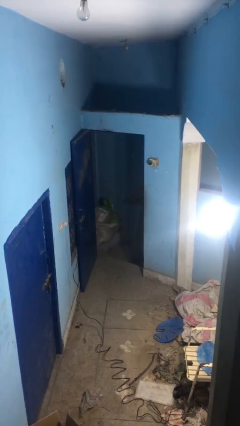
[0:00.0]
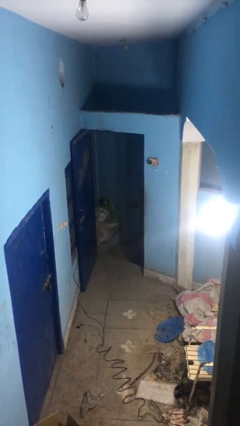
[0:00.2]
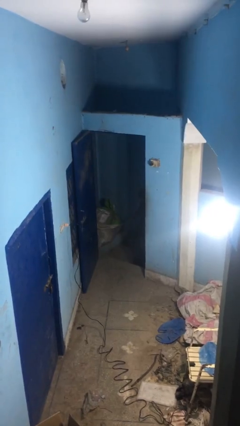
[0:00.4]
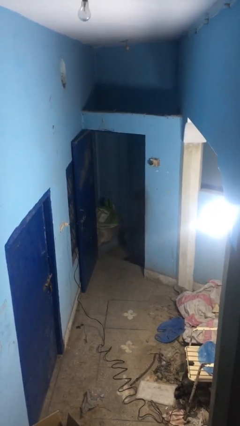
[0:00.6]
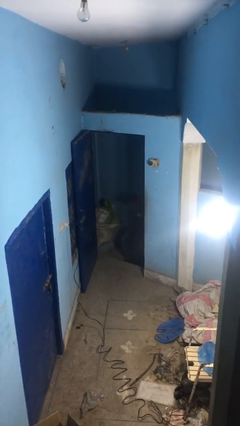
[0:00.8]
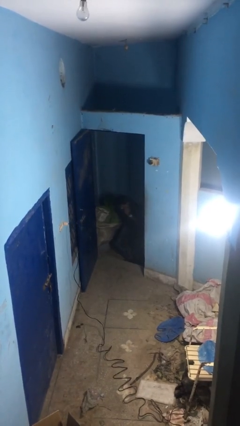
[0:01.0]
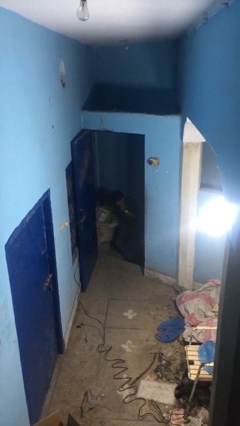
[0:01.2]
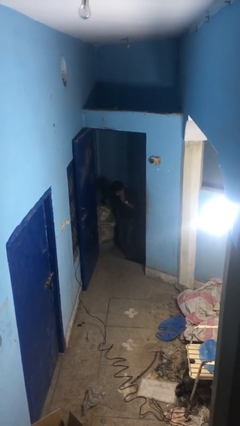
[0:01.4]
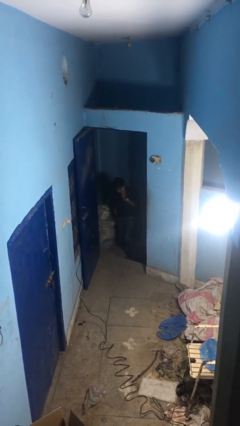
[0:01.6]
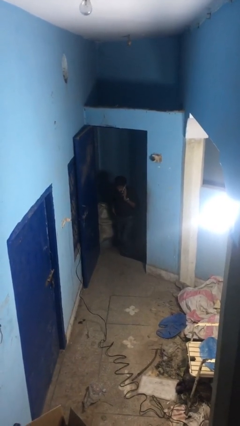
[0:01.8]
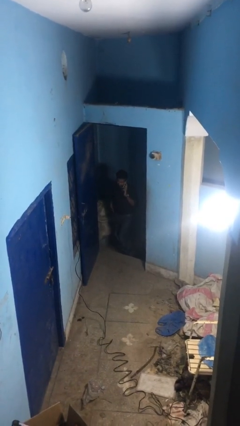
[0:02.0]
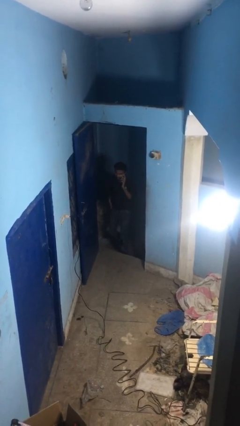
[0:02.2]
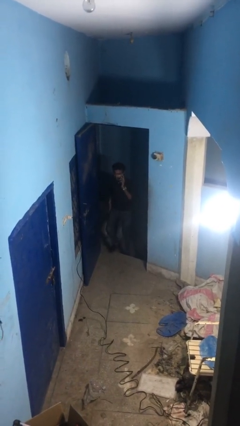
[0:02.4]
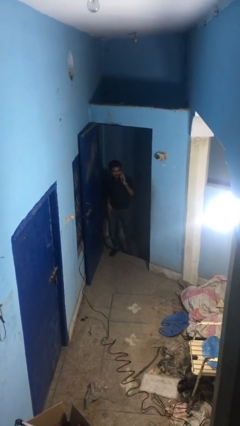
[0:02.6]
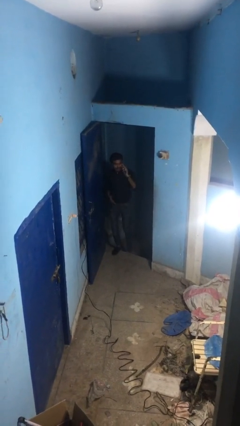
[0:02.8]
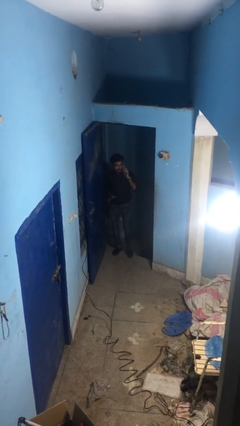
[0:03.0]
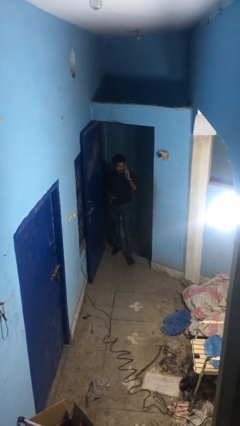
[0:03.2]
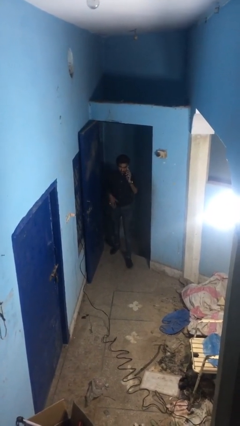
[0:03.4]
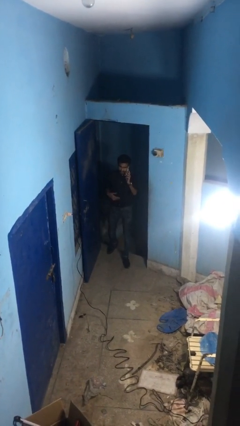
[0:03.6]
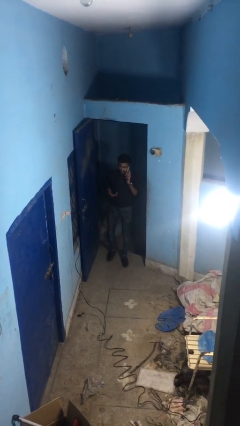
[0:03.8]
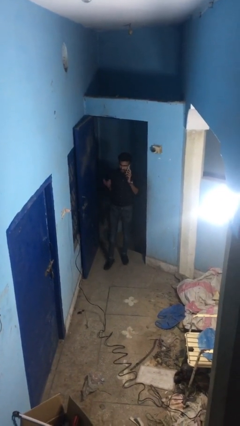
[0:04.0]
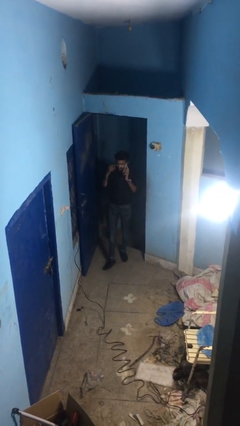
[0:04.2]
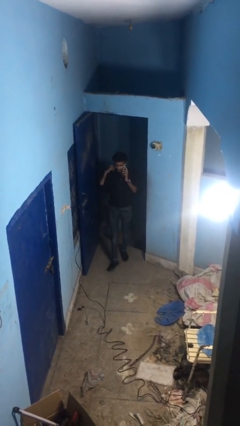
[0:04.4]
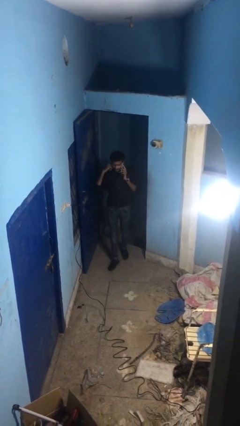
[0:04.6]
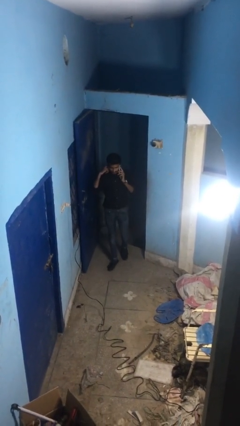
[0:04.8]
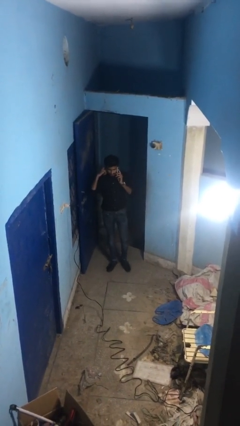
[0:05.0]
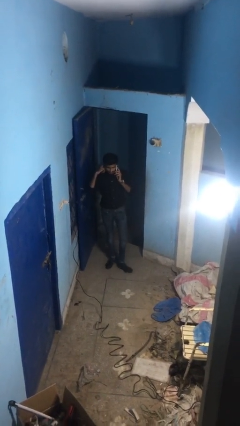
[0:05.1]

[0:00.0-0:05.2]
person enters scene through structure

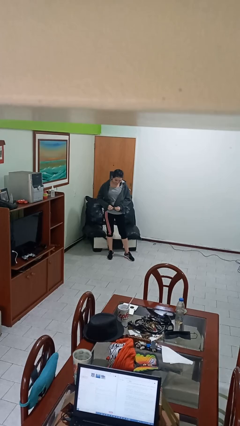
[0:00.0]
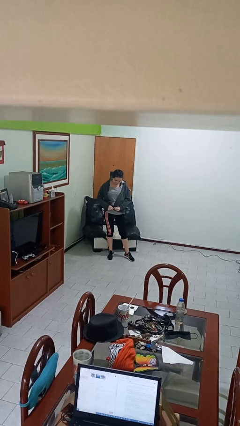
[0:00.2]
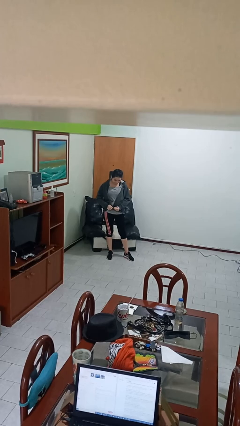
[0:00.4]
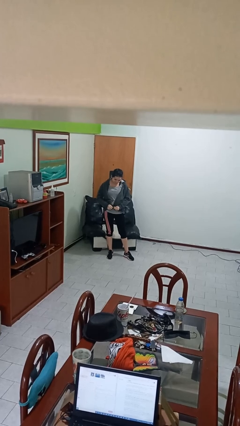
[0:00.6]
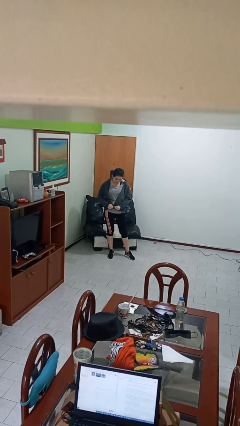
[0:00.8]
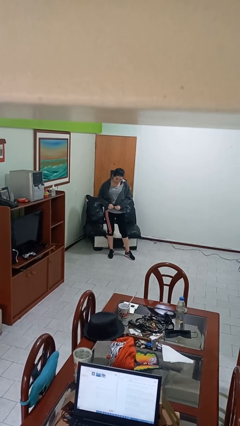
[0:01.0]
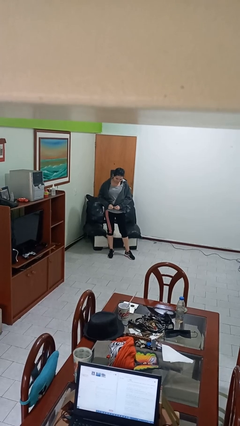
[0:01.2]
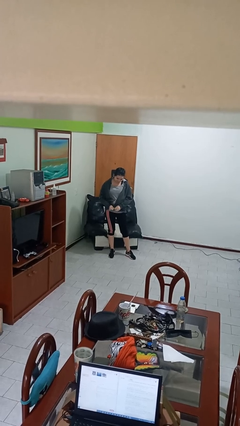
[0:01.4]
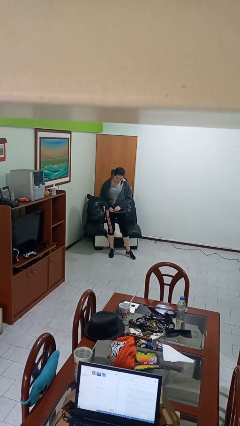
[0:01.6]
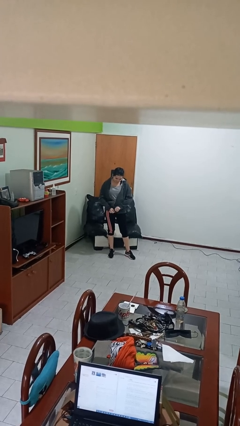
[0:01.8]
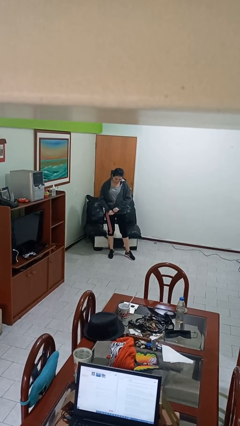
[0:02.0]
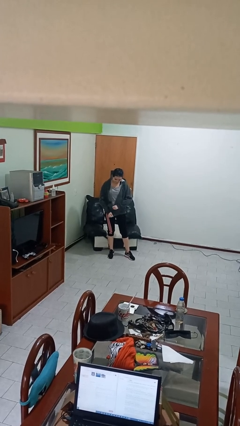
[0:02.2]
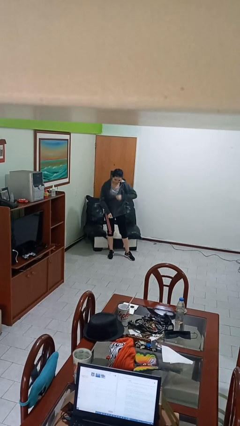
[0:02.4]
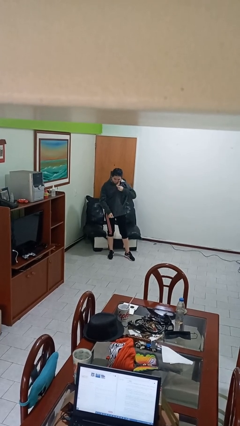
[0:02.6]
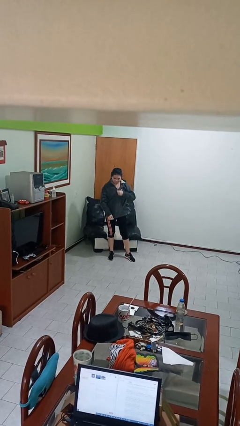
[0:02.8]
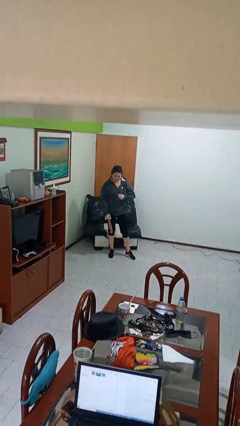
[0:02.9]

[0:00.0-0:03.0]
person zips up jacket

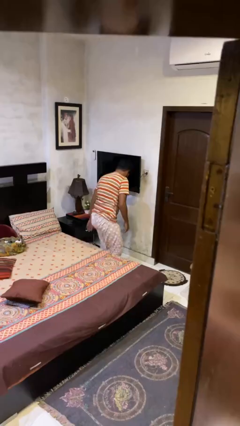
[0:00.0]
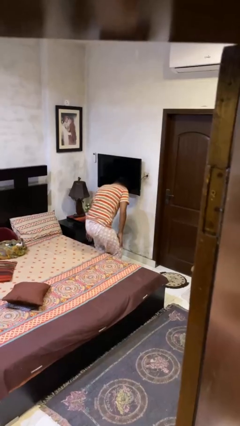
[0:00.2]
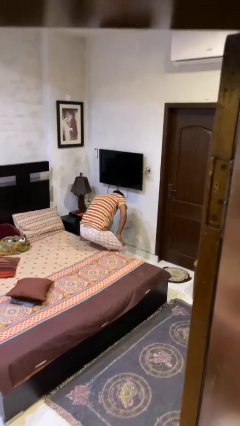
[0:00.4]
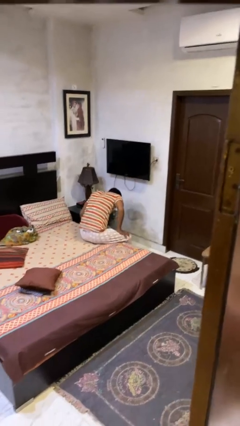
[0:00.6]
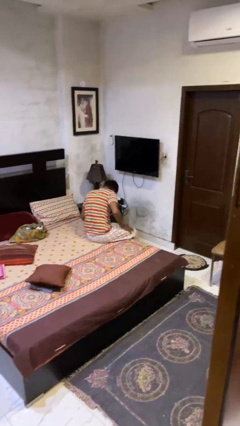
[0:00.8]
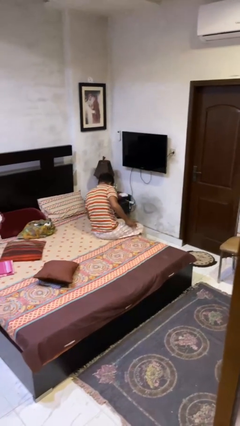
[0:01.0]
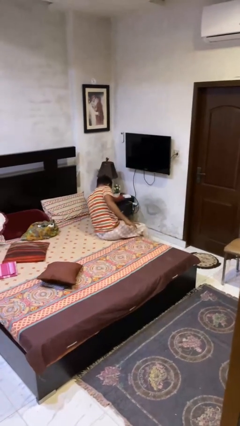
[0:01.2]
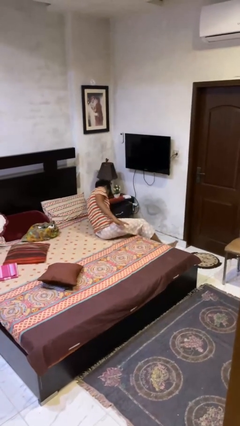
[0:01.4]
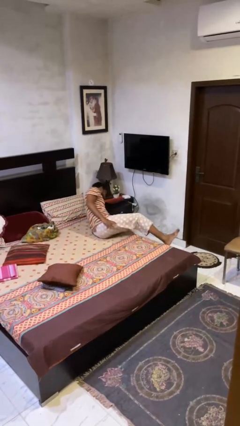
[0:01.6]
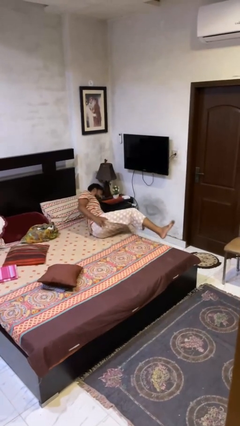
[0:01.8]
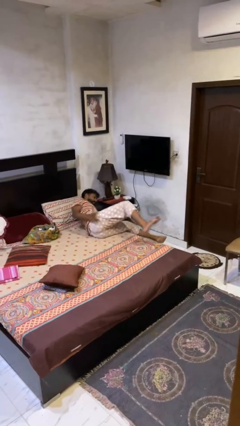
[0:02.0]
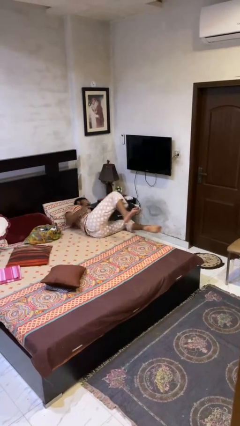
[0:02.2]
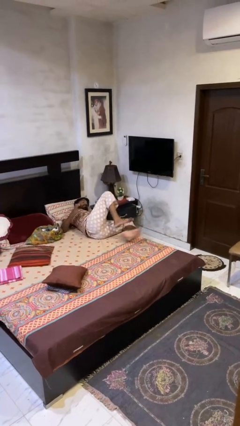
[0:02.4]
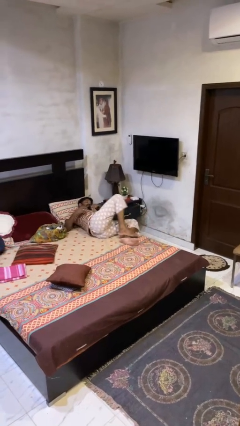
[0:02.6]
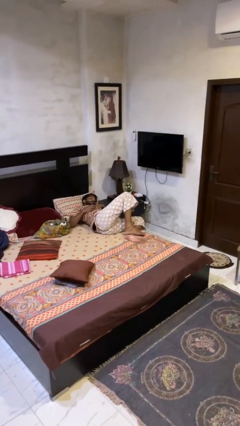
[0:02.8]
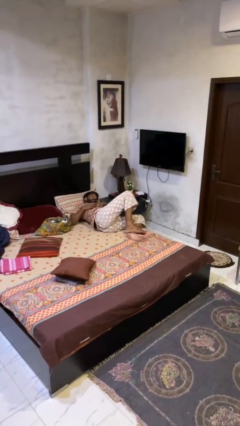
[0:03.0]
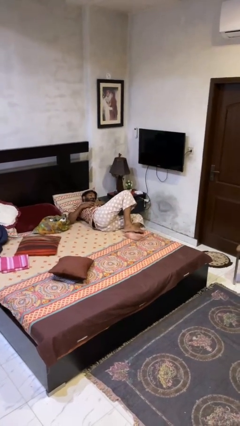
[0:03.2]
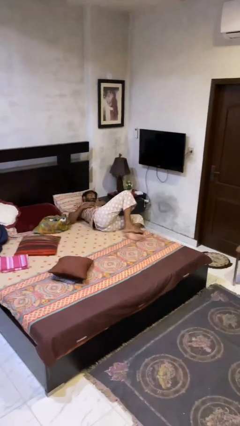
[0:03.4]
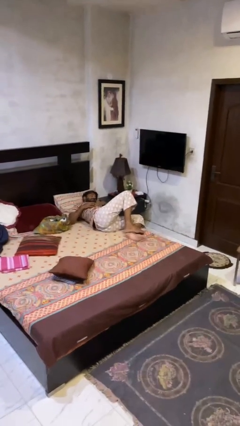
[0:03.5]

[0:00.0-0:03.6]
person lies down on bed

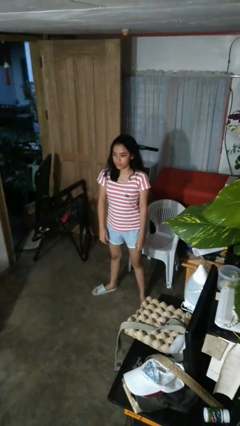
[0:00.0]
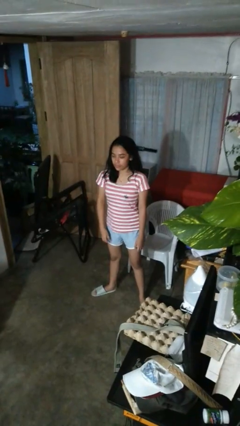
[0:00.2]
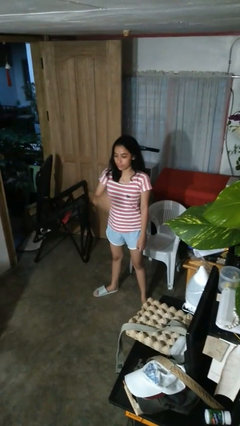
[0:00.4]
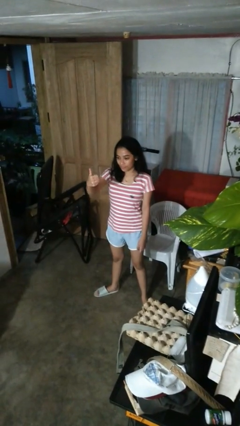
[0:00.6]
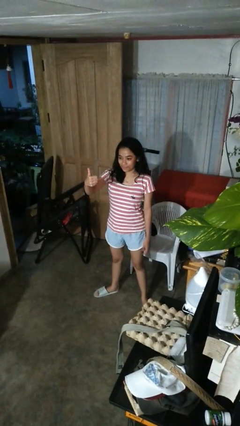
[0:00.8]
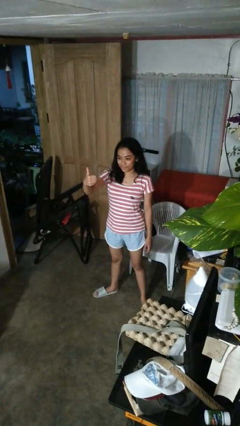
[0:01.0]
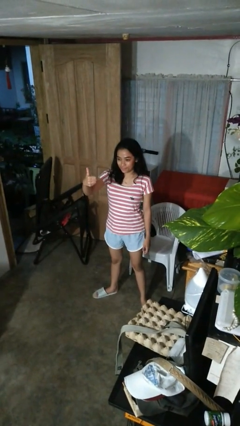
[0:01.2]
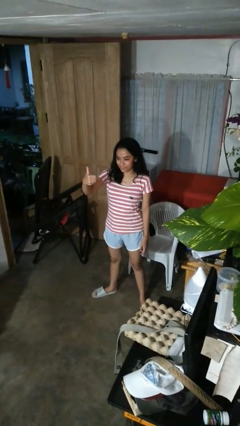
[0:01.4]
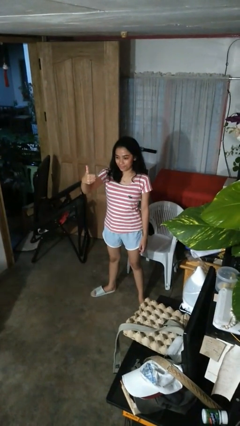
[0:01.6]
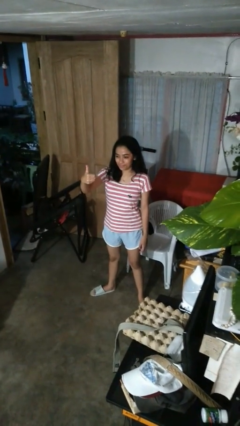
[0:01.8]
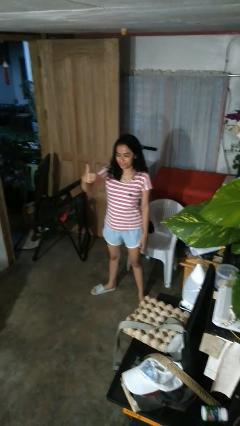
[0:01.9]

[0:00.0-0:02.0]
person gestures thumbs up

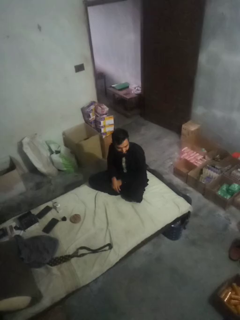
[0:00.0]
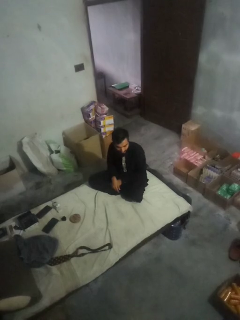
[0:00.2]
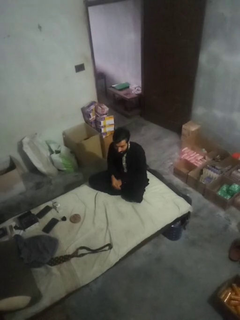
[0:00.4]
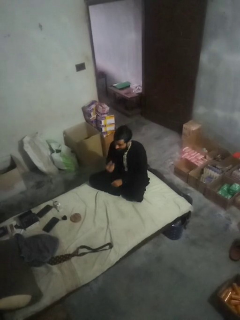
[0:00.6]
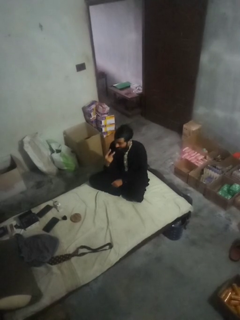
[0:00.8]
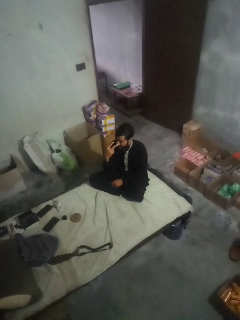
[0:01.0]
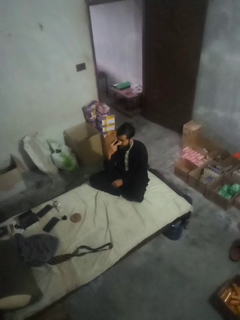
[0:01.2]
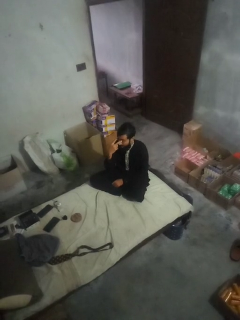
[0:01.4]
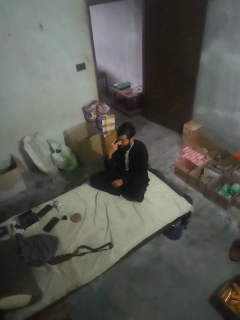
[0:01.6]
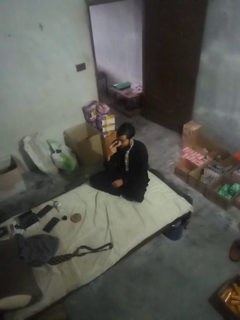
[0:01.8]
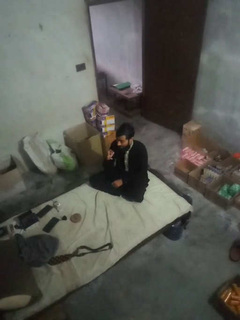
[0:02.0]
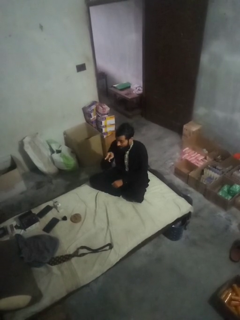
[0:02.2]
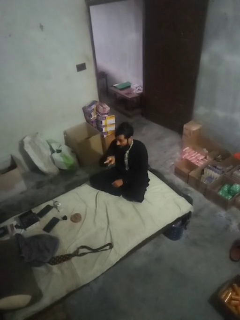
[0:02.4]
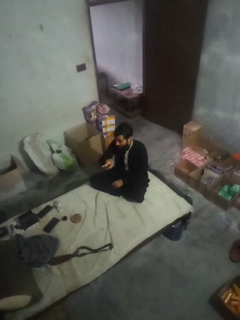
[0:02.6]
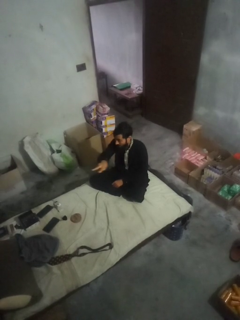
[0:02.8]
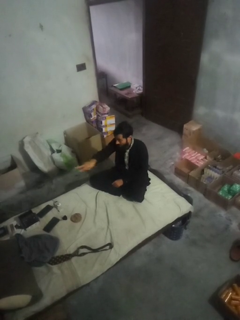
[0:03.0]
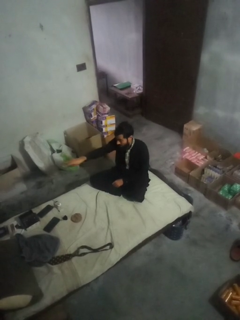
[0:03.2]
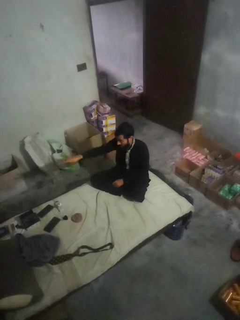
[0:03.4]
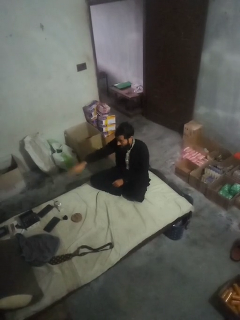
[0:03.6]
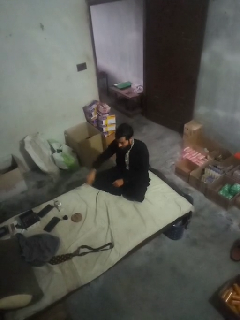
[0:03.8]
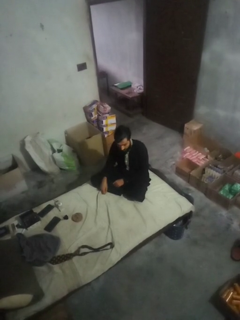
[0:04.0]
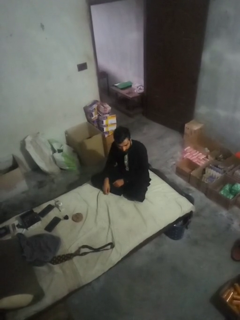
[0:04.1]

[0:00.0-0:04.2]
person gestures watch closely

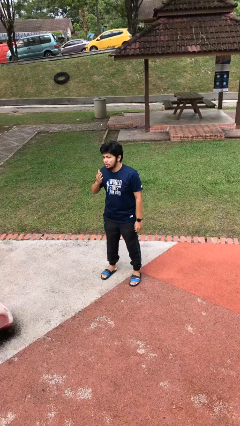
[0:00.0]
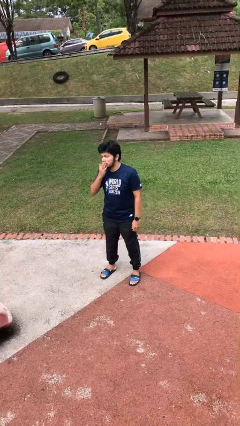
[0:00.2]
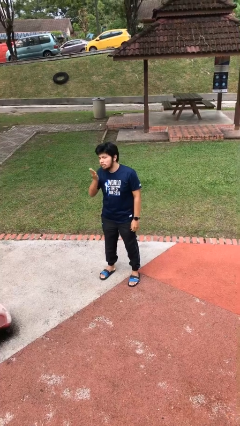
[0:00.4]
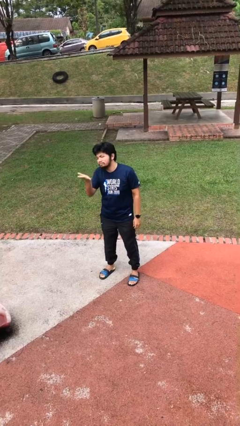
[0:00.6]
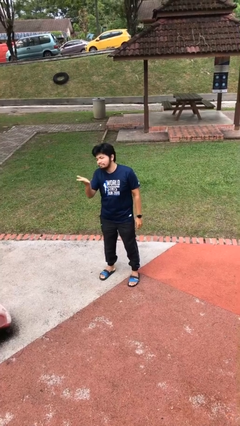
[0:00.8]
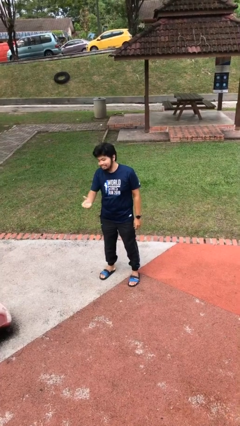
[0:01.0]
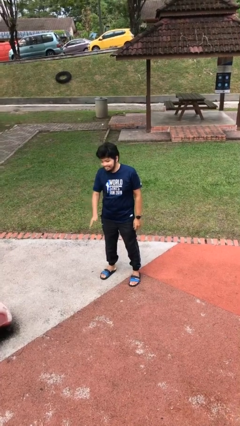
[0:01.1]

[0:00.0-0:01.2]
person gestures blow kiss
